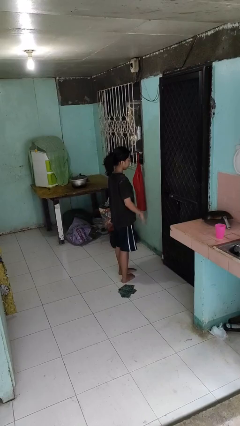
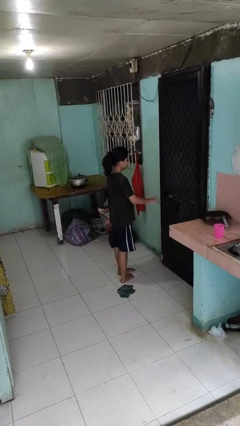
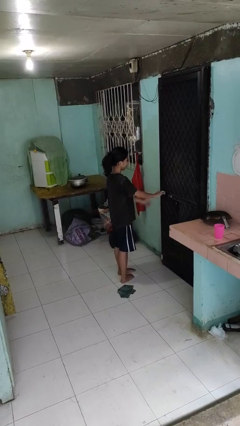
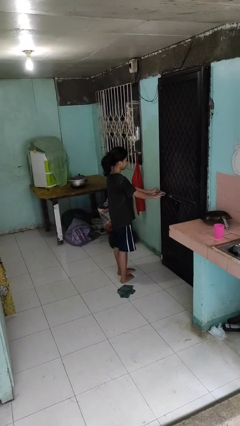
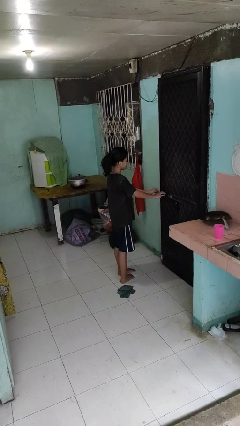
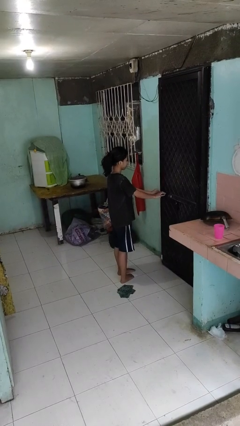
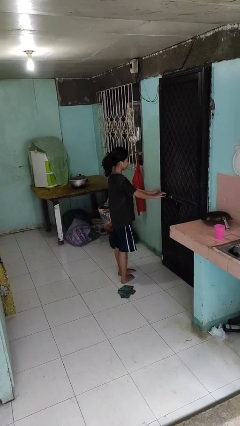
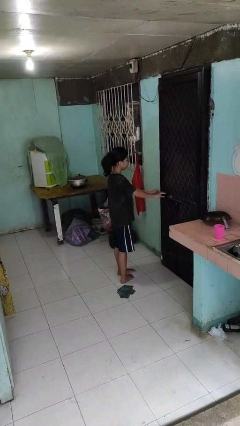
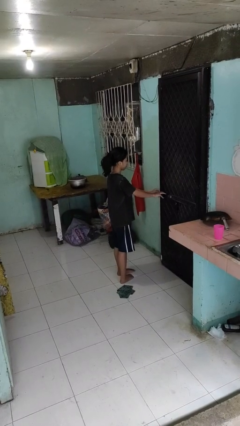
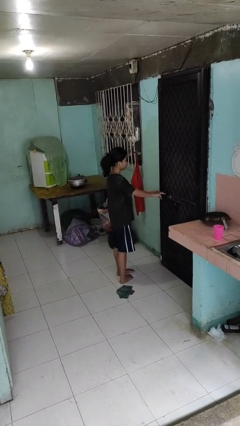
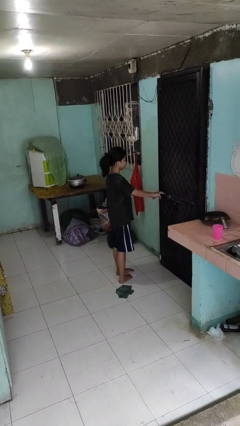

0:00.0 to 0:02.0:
person unlocks door with keys

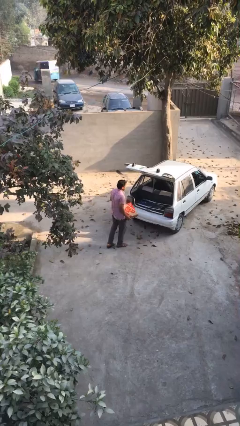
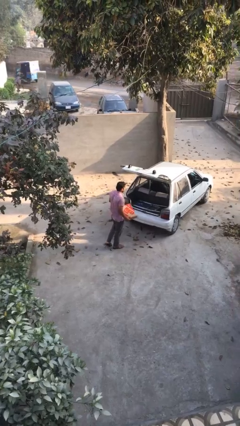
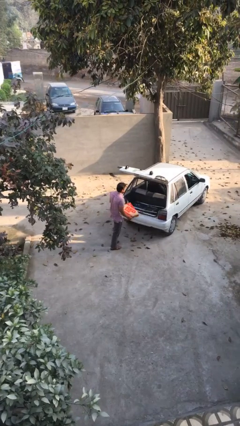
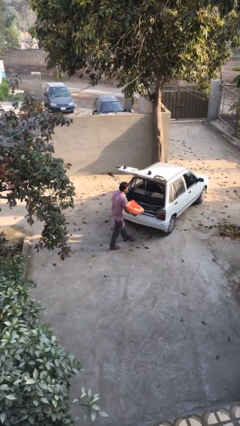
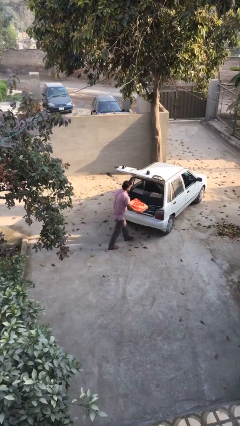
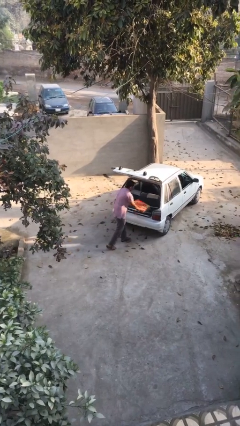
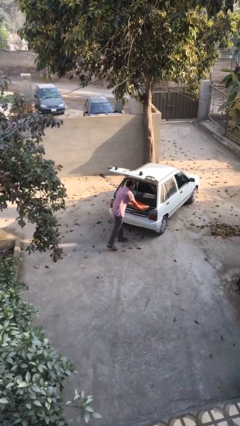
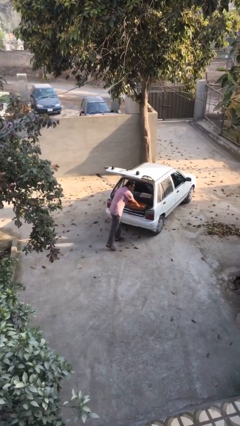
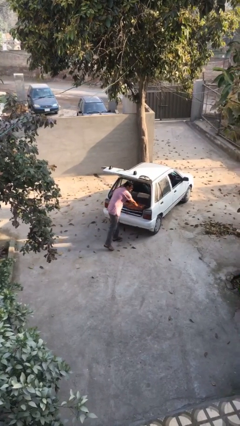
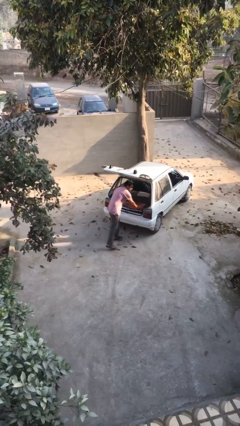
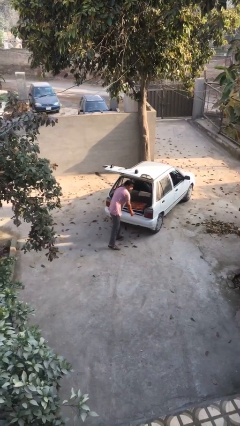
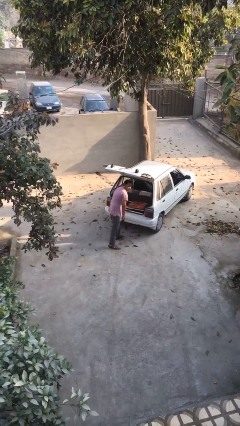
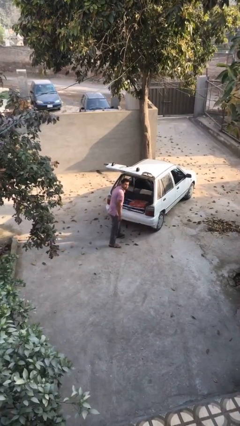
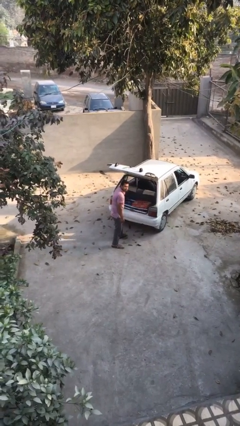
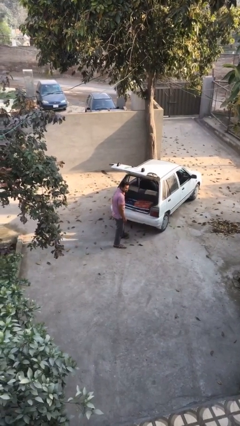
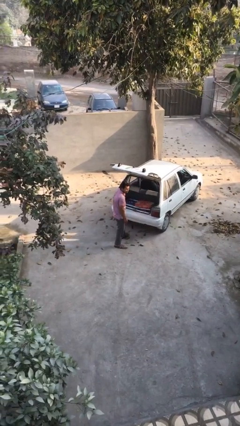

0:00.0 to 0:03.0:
person loads car

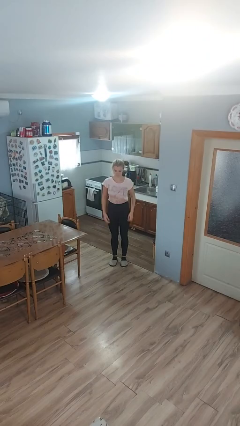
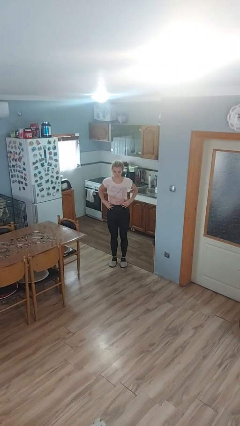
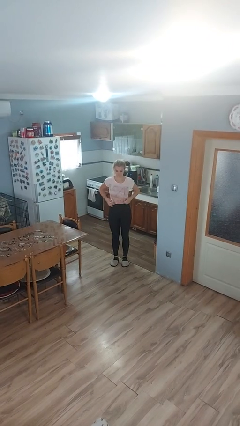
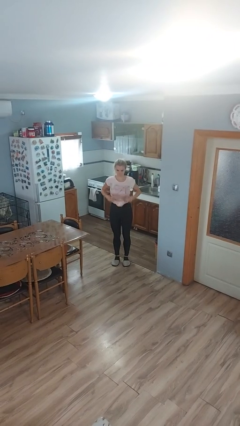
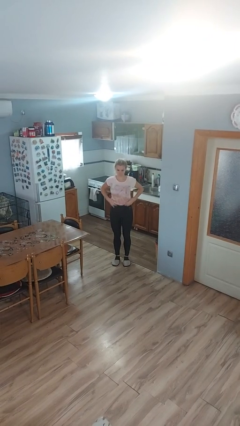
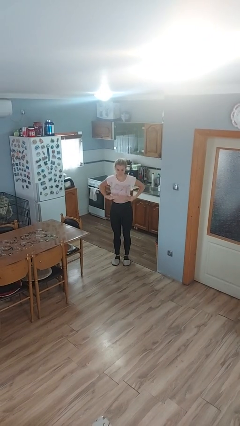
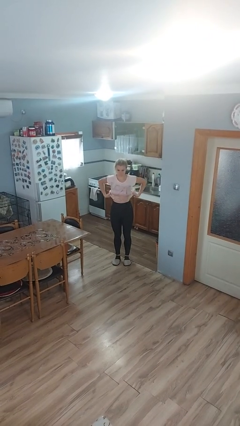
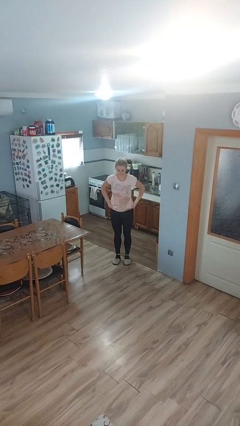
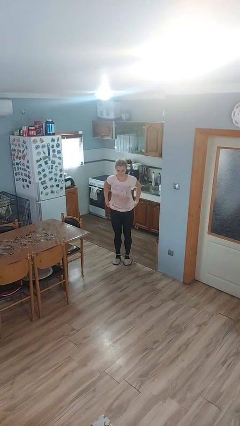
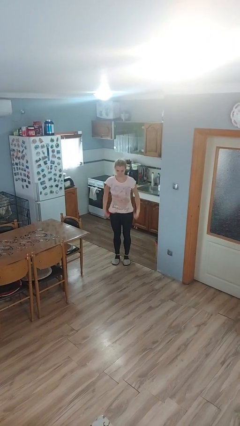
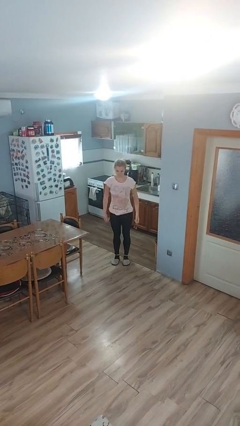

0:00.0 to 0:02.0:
person untucks shirt

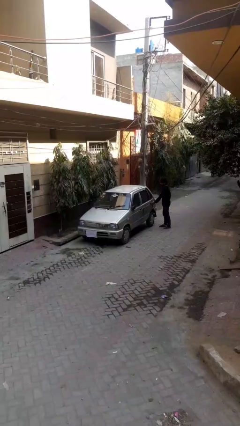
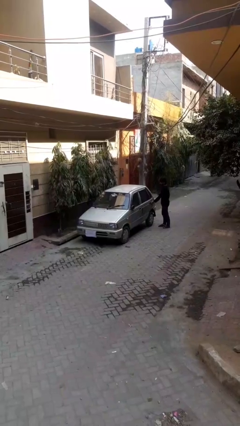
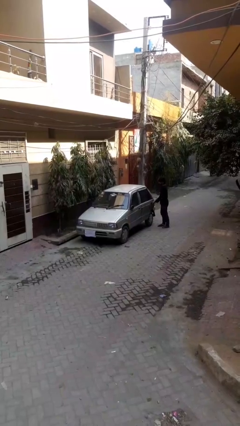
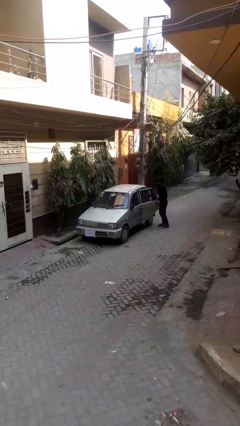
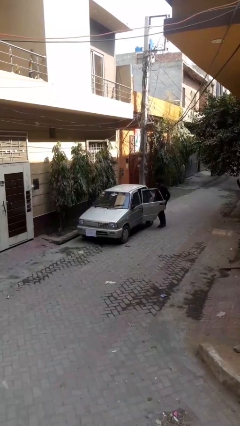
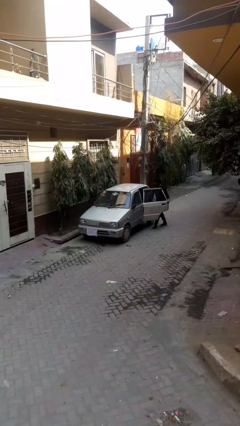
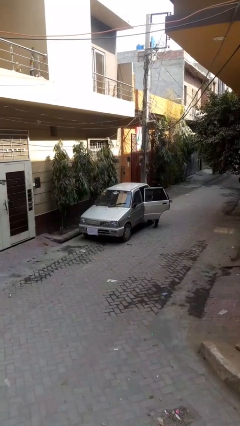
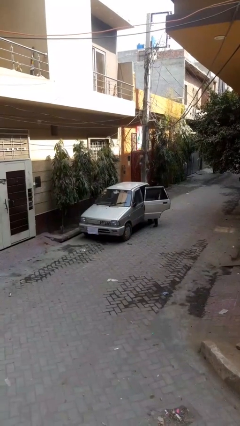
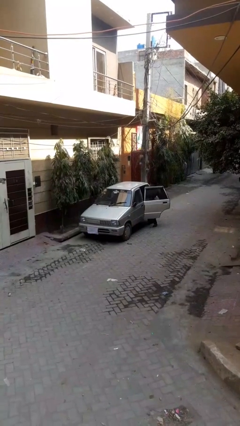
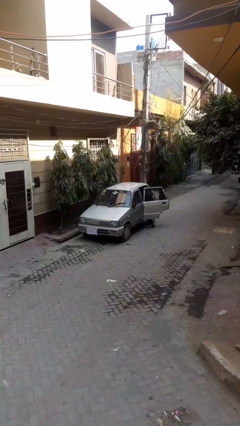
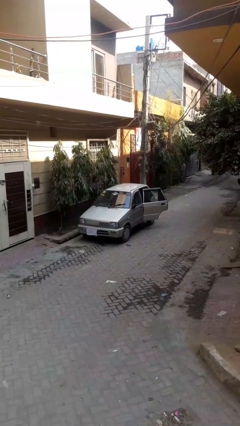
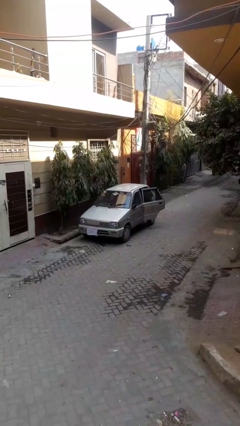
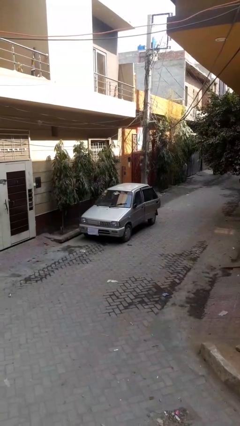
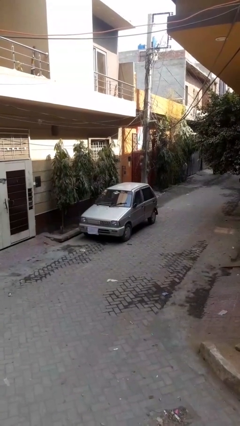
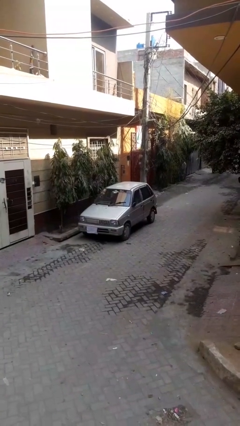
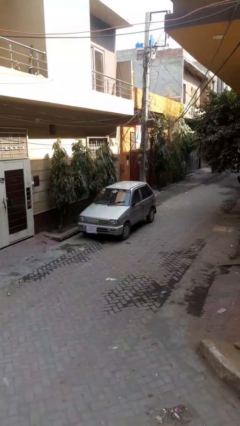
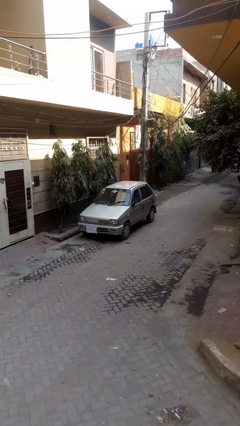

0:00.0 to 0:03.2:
car picks up person

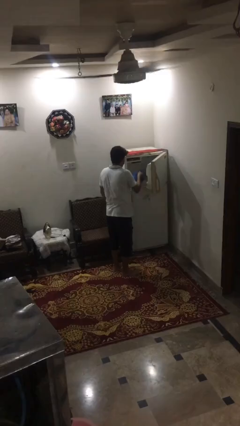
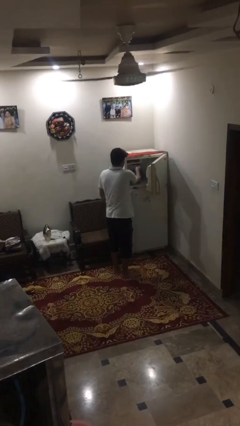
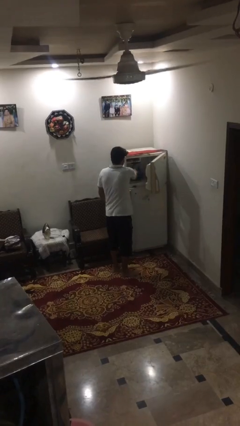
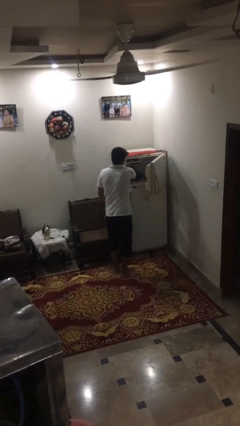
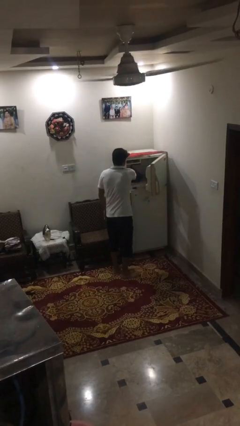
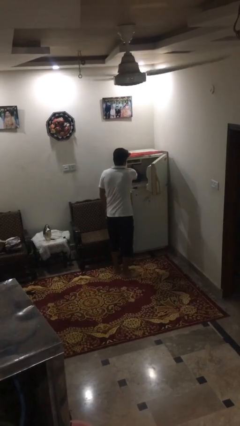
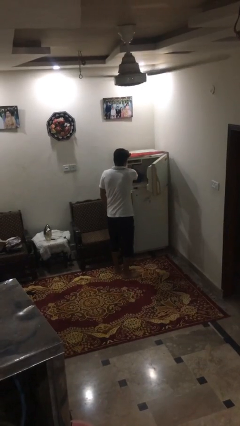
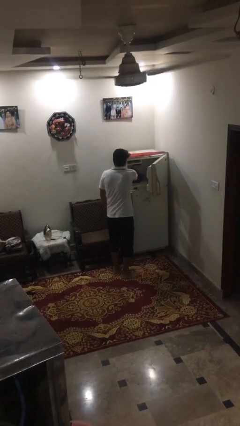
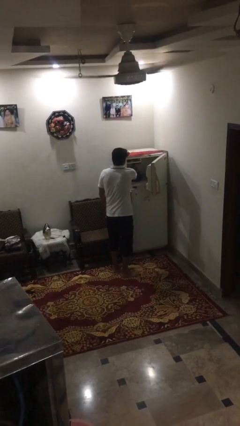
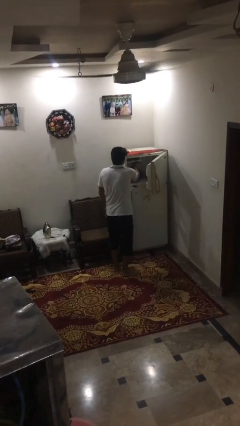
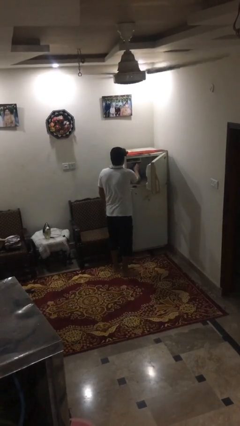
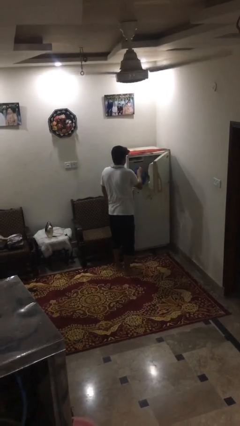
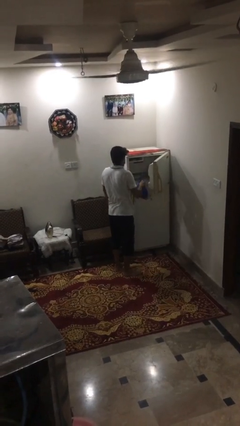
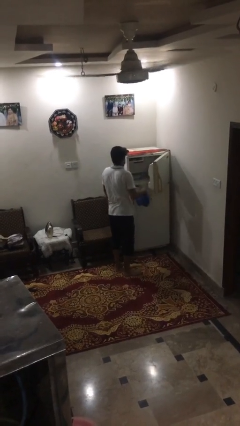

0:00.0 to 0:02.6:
person loads groceries into refrigerator

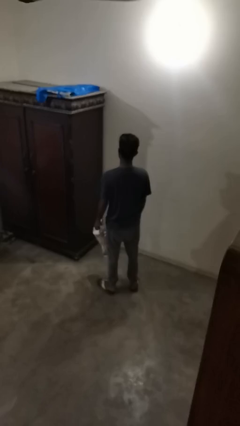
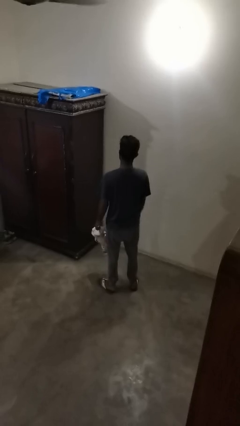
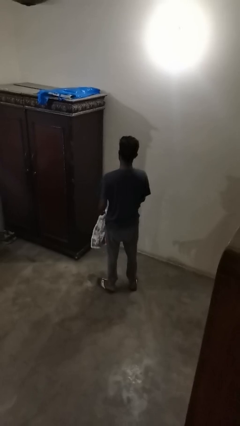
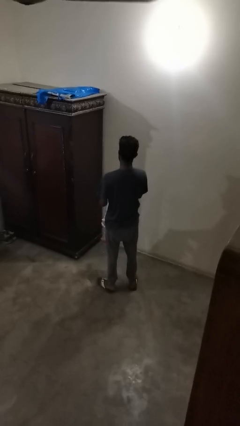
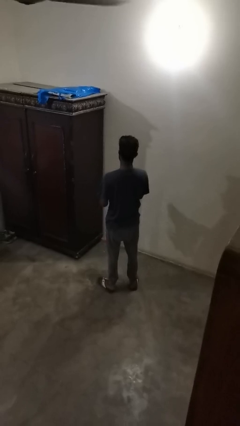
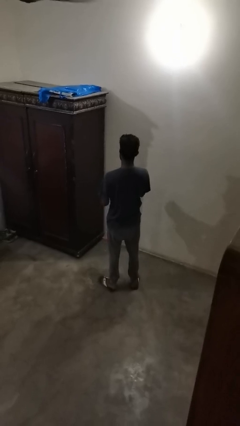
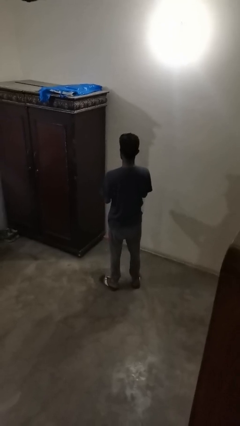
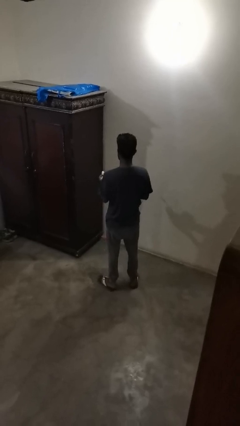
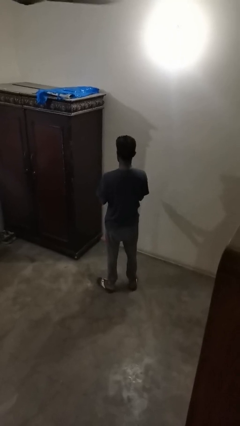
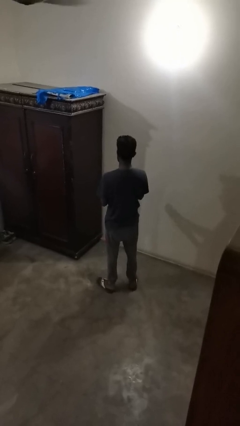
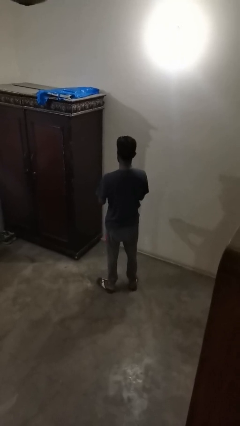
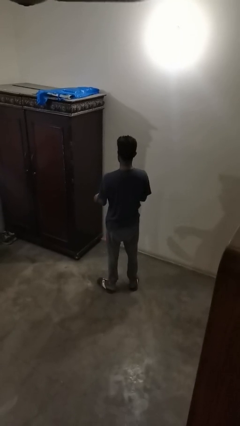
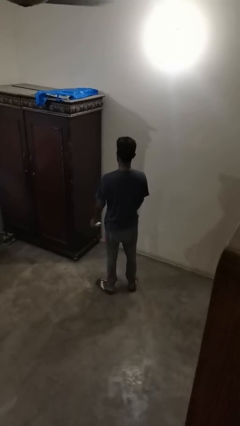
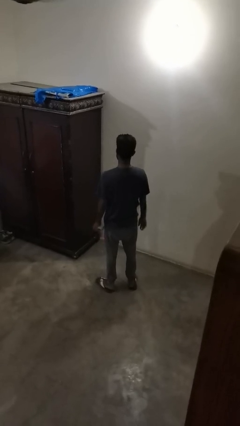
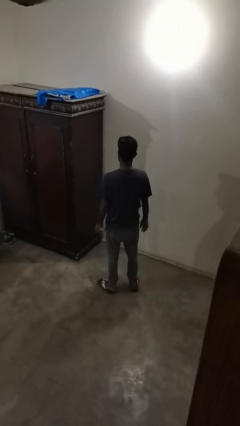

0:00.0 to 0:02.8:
person crumples paper

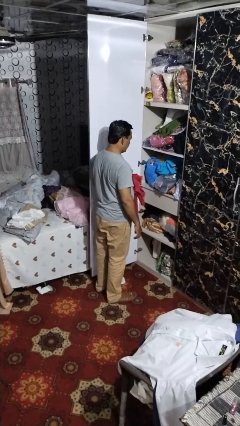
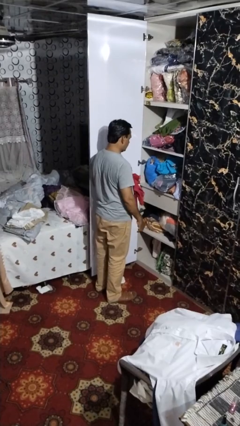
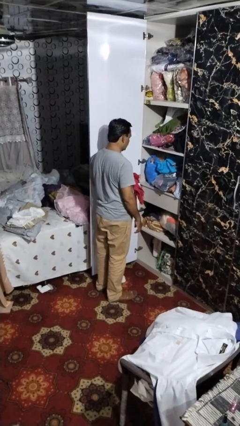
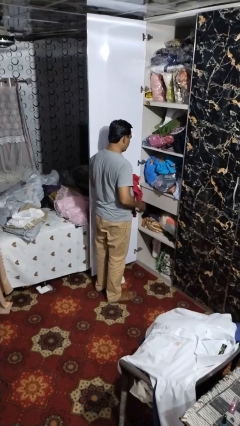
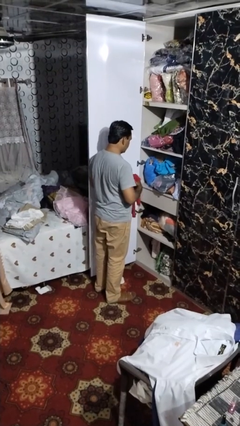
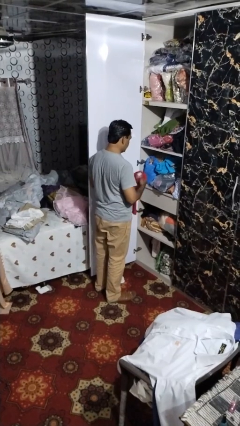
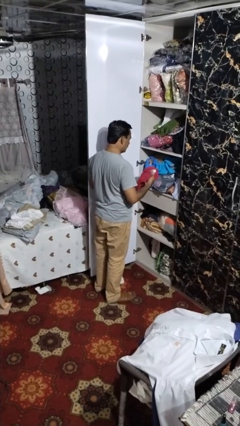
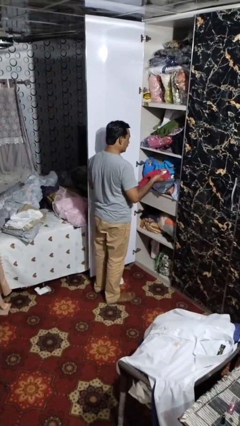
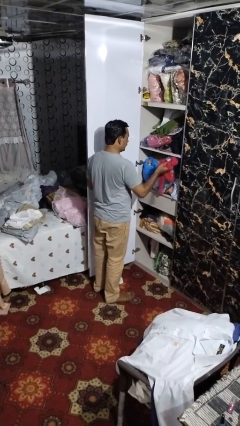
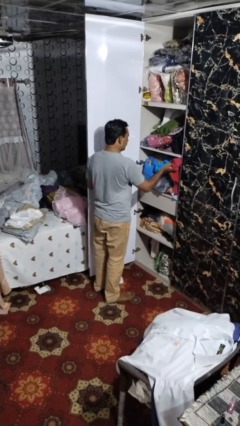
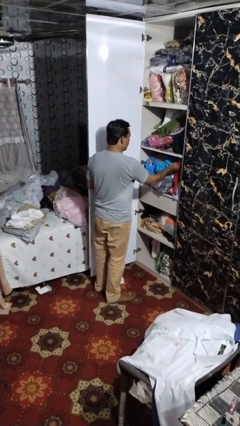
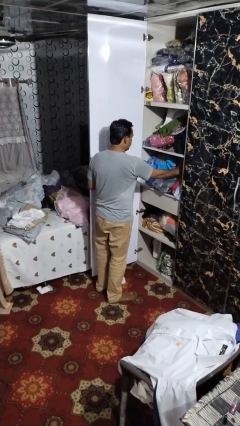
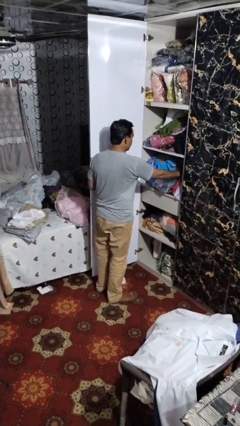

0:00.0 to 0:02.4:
person puts clothes into dresser
